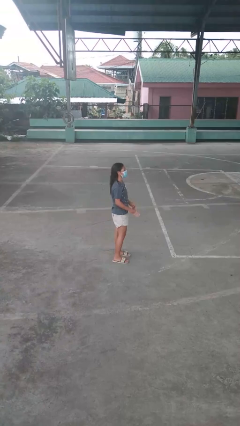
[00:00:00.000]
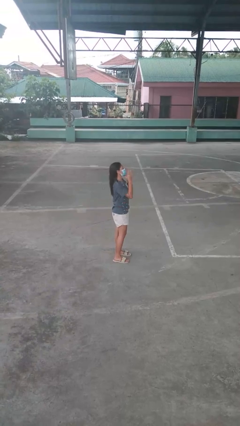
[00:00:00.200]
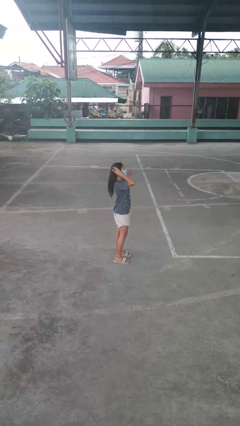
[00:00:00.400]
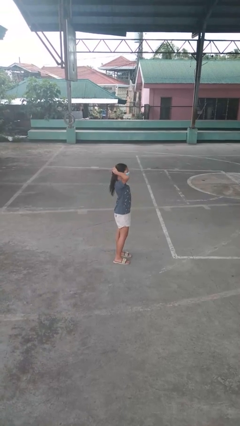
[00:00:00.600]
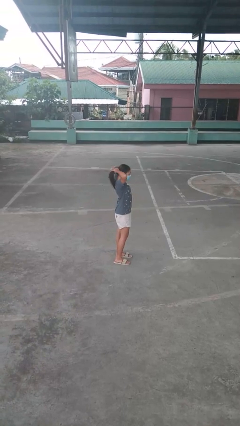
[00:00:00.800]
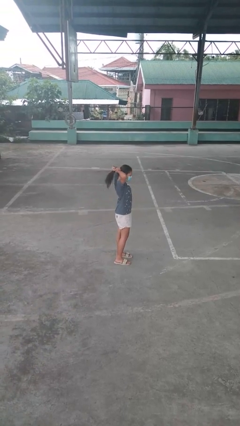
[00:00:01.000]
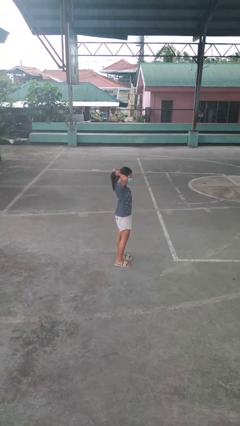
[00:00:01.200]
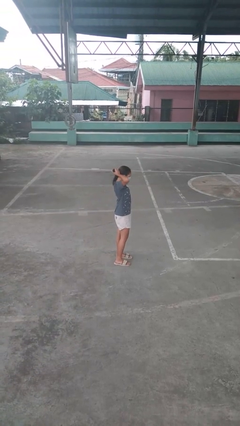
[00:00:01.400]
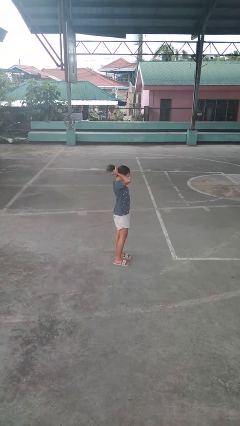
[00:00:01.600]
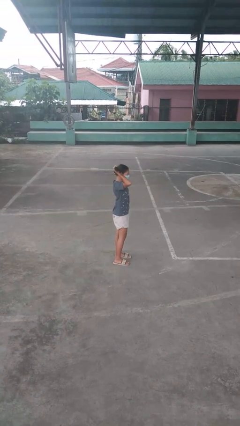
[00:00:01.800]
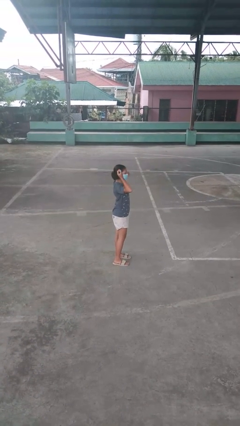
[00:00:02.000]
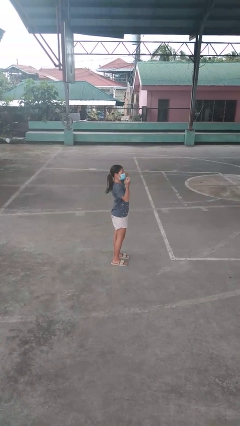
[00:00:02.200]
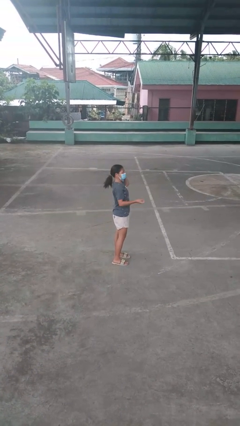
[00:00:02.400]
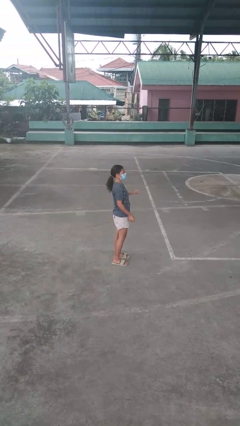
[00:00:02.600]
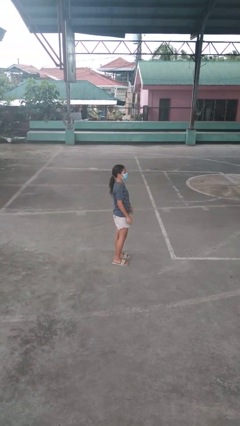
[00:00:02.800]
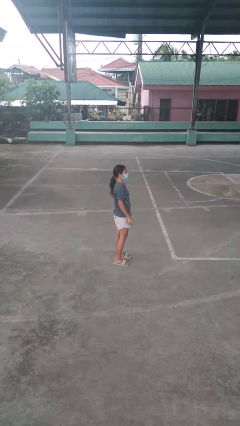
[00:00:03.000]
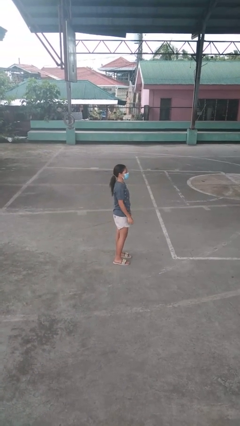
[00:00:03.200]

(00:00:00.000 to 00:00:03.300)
person puts hair in ponytail

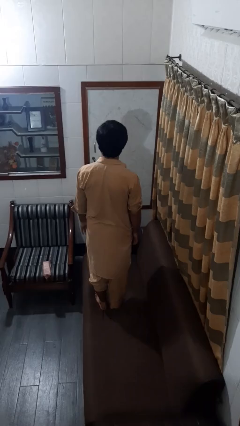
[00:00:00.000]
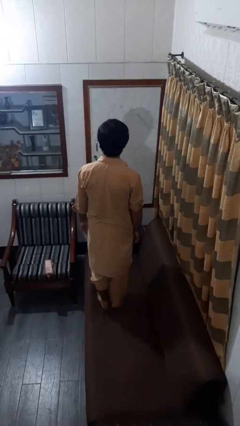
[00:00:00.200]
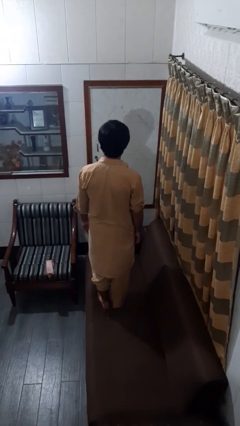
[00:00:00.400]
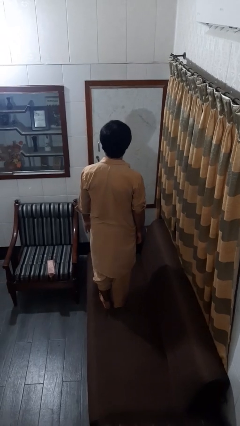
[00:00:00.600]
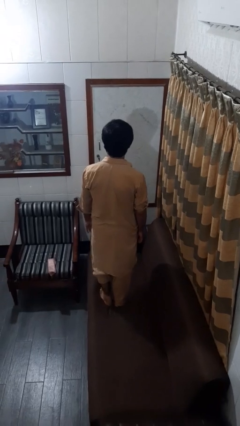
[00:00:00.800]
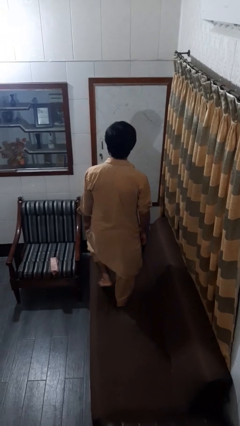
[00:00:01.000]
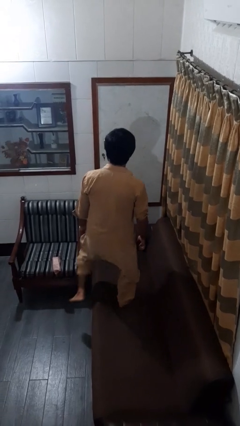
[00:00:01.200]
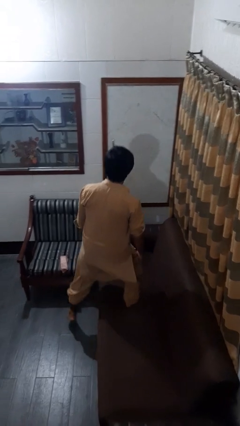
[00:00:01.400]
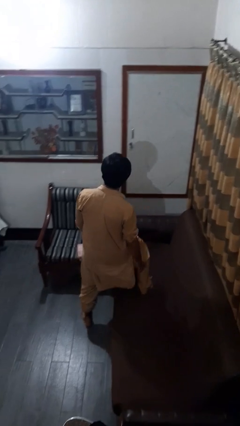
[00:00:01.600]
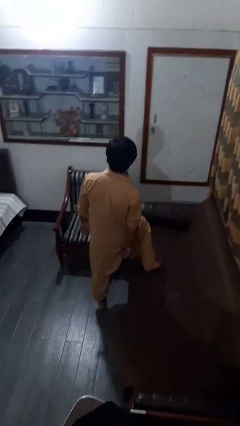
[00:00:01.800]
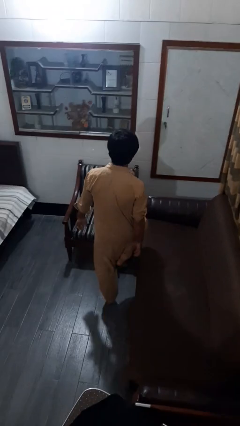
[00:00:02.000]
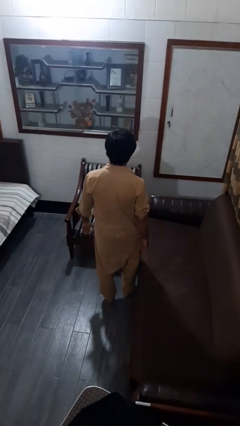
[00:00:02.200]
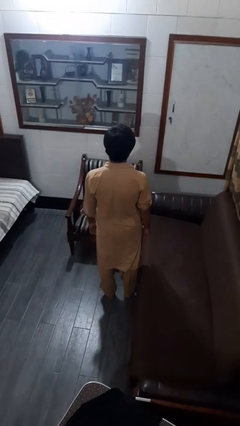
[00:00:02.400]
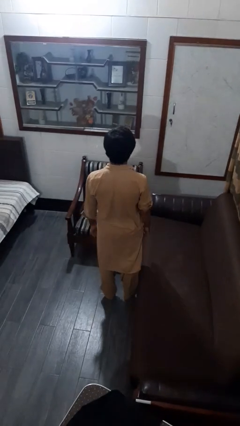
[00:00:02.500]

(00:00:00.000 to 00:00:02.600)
person climbs off couch

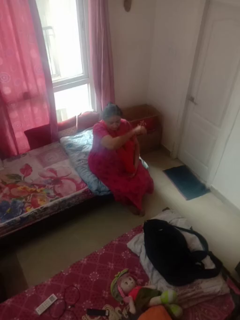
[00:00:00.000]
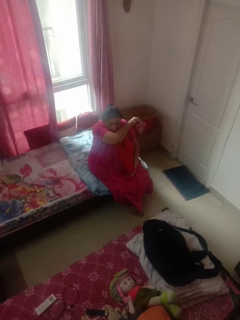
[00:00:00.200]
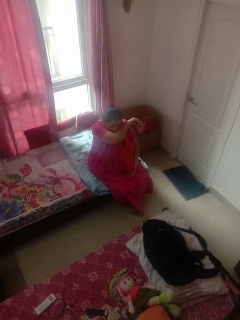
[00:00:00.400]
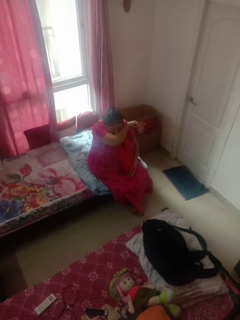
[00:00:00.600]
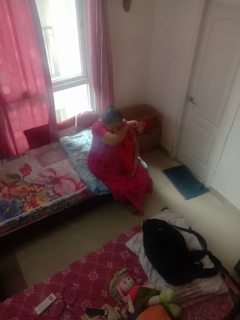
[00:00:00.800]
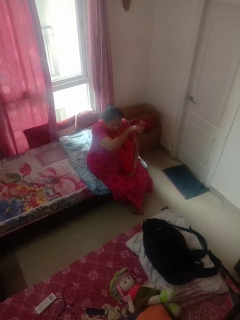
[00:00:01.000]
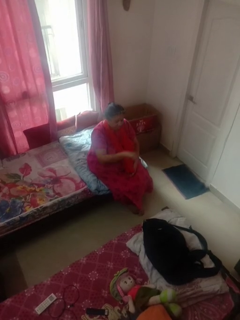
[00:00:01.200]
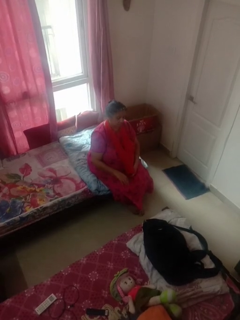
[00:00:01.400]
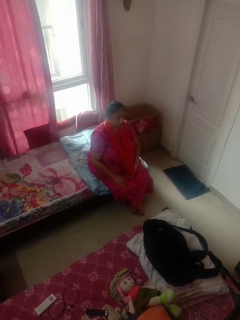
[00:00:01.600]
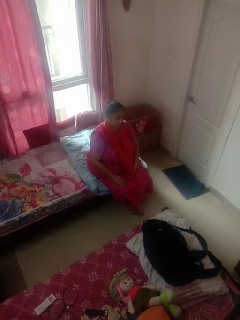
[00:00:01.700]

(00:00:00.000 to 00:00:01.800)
person sneezes into arm

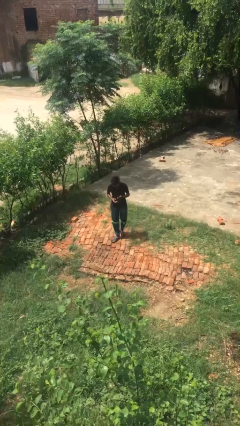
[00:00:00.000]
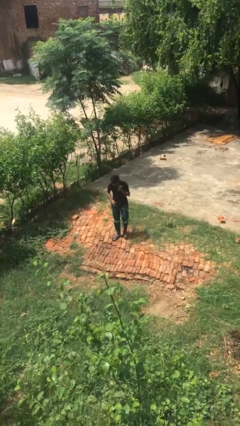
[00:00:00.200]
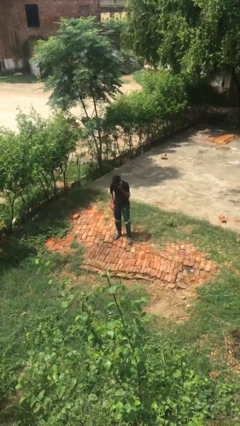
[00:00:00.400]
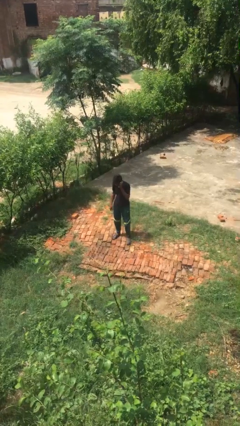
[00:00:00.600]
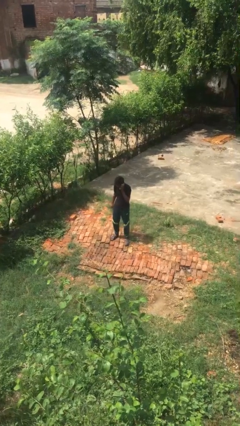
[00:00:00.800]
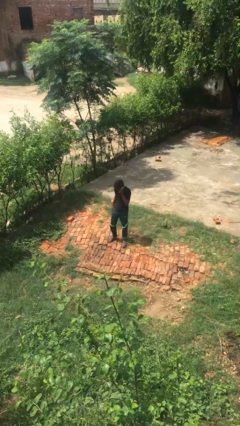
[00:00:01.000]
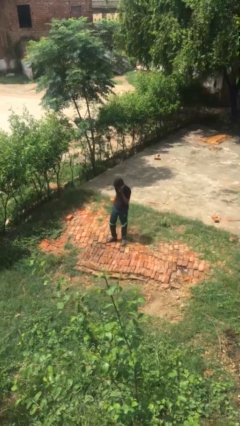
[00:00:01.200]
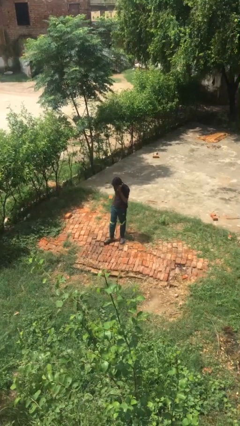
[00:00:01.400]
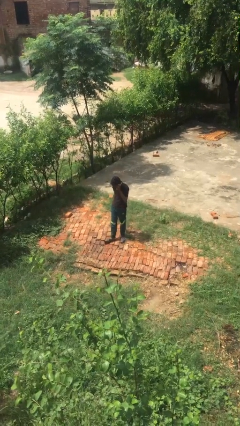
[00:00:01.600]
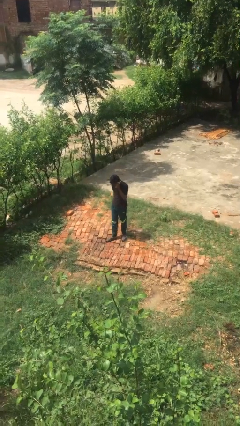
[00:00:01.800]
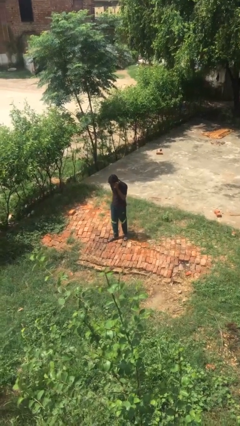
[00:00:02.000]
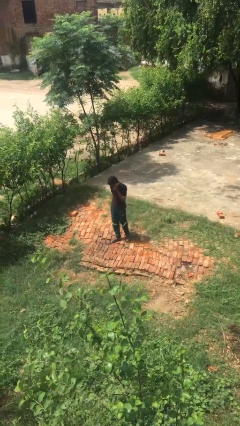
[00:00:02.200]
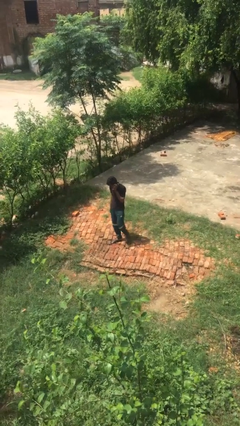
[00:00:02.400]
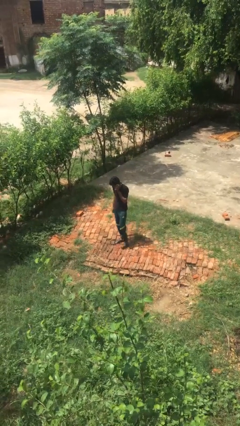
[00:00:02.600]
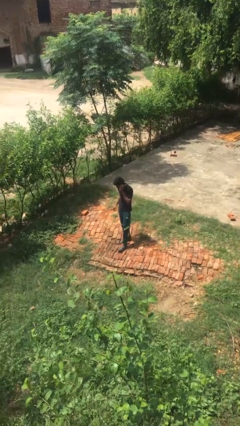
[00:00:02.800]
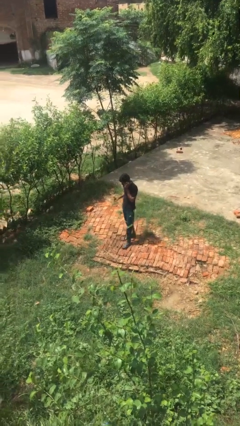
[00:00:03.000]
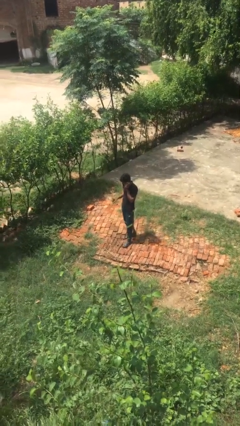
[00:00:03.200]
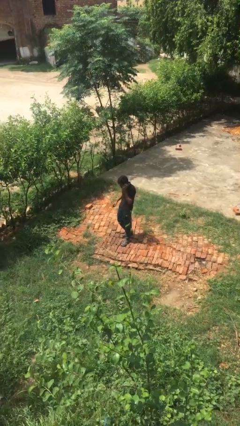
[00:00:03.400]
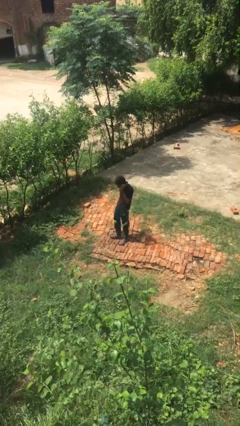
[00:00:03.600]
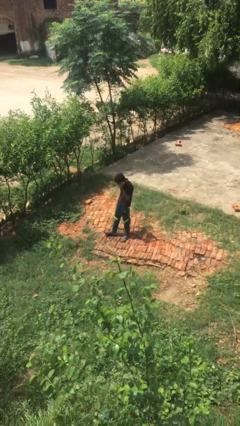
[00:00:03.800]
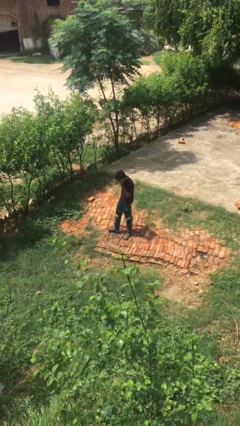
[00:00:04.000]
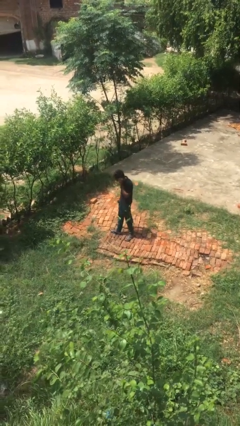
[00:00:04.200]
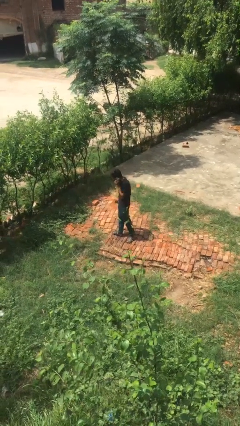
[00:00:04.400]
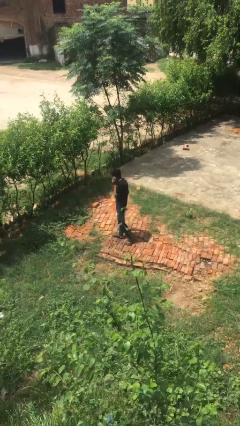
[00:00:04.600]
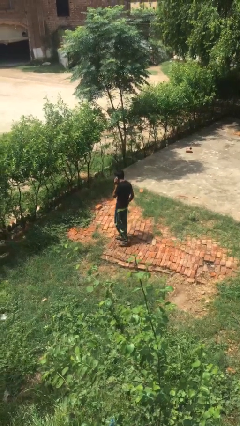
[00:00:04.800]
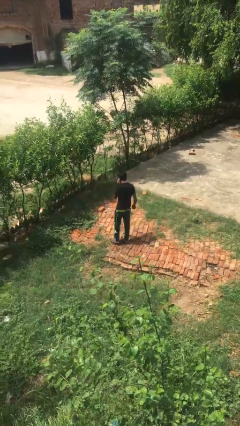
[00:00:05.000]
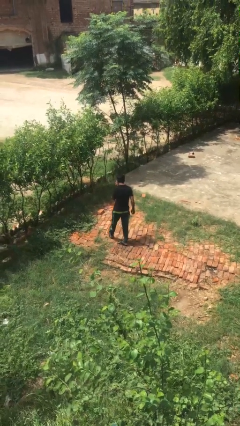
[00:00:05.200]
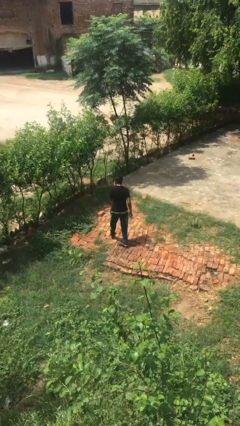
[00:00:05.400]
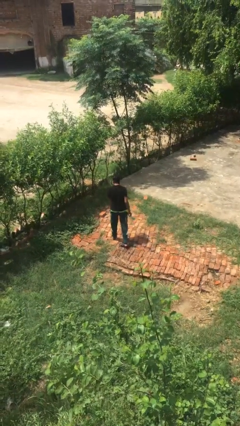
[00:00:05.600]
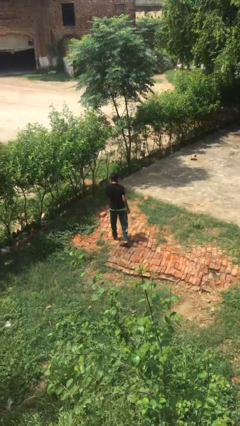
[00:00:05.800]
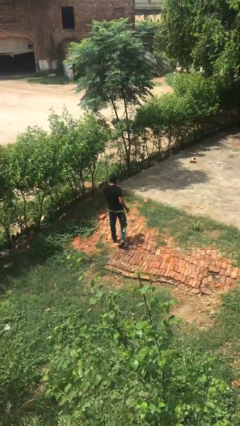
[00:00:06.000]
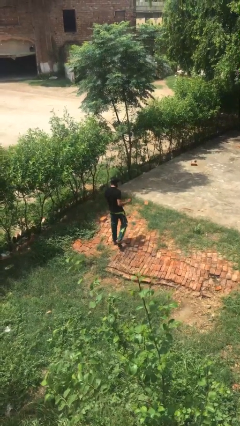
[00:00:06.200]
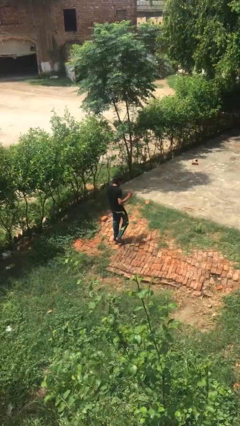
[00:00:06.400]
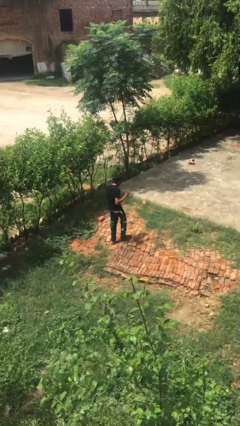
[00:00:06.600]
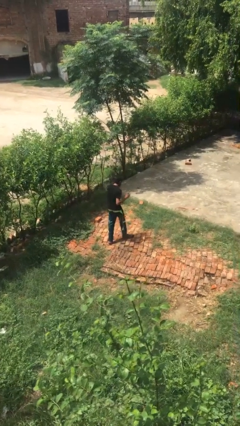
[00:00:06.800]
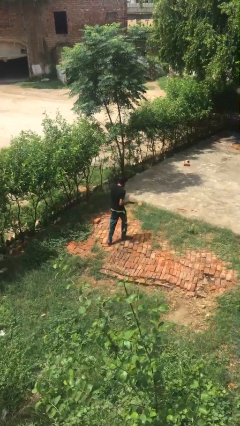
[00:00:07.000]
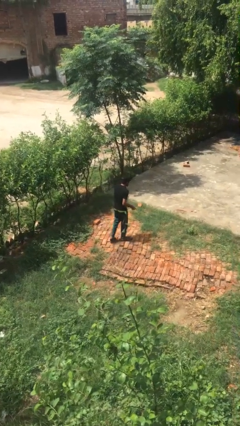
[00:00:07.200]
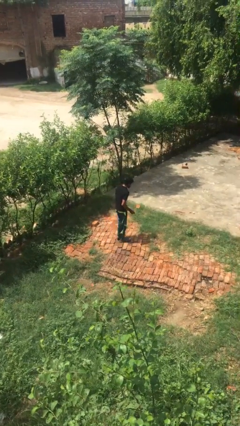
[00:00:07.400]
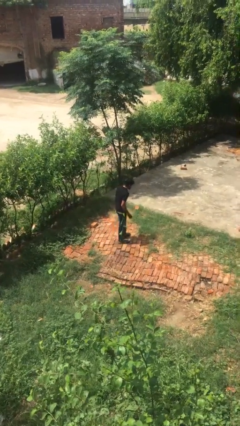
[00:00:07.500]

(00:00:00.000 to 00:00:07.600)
person talks on phone

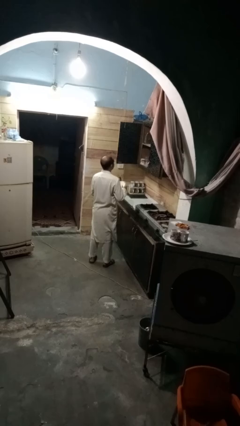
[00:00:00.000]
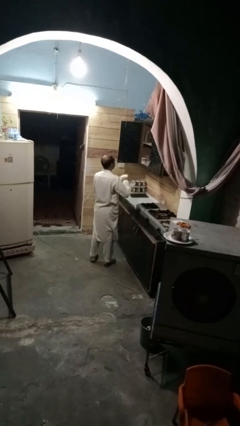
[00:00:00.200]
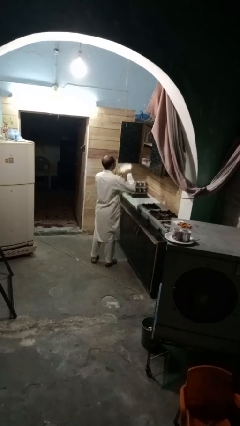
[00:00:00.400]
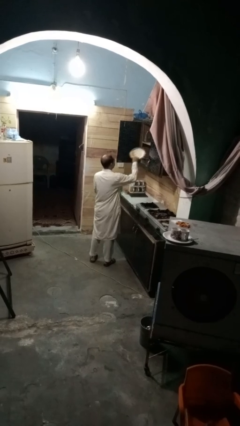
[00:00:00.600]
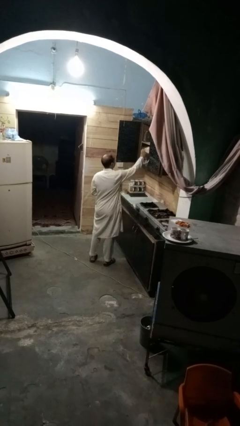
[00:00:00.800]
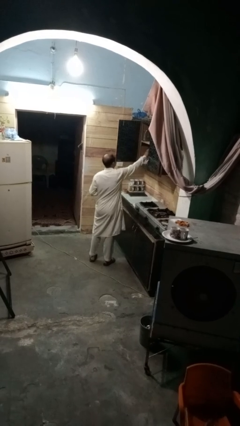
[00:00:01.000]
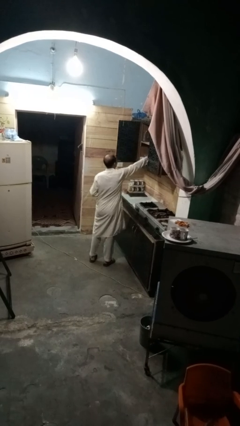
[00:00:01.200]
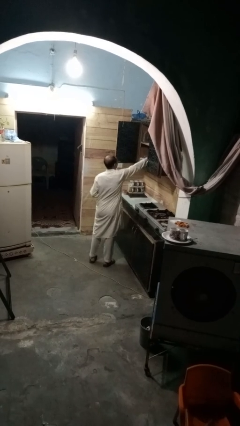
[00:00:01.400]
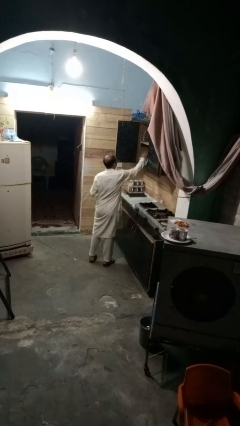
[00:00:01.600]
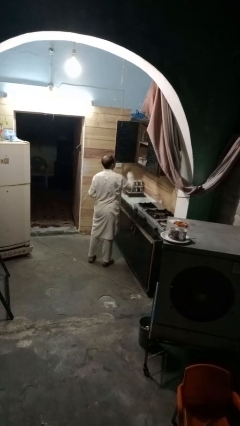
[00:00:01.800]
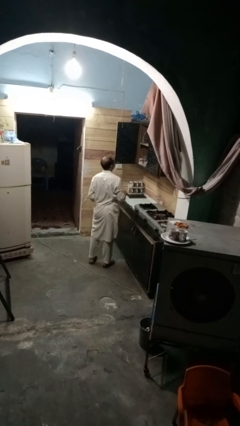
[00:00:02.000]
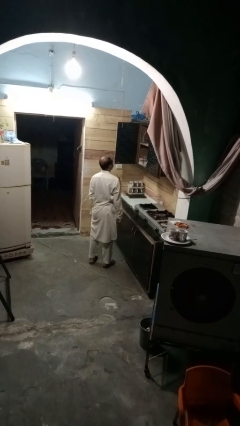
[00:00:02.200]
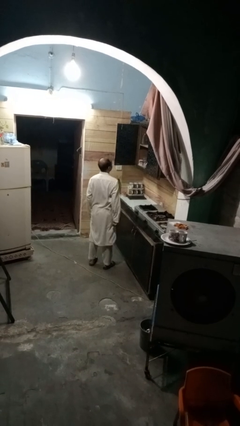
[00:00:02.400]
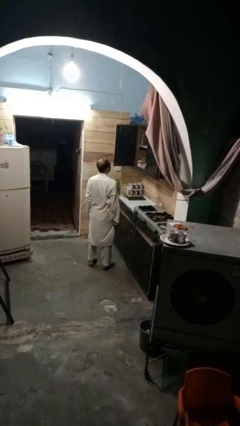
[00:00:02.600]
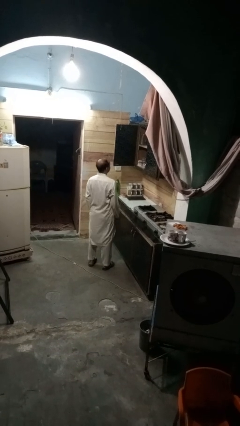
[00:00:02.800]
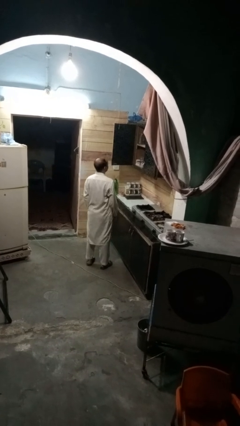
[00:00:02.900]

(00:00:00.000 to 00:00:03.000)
person puts object in cabinet
